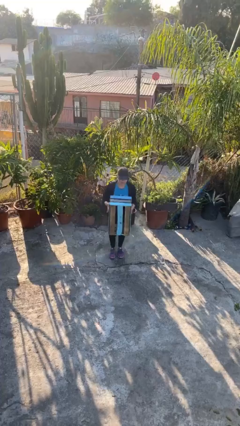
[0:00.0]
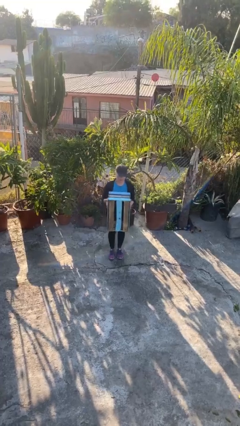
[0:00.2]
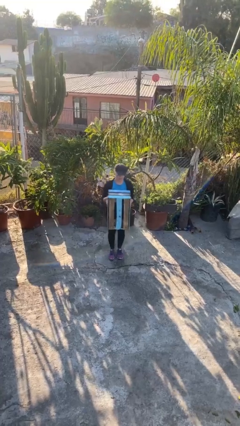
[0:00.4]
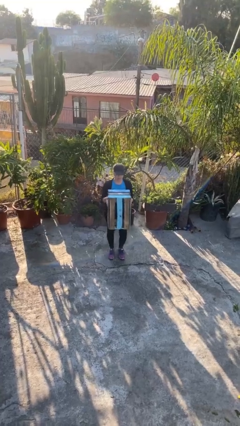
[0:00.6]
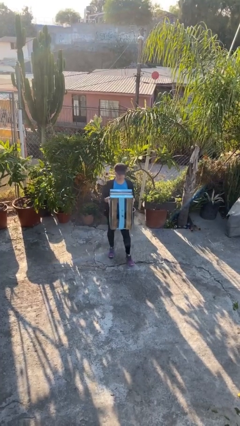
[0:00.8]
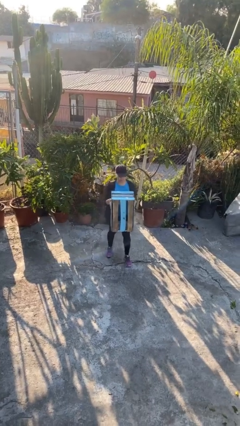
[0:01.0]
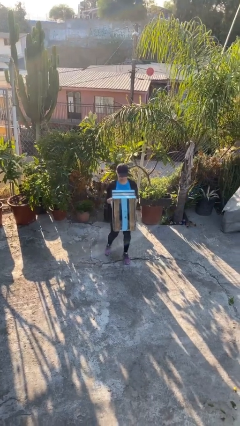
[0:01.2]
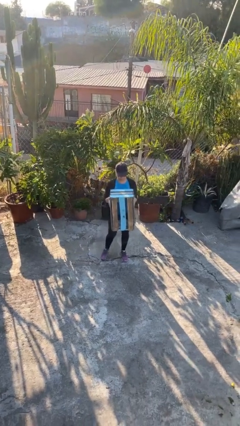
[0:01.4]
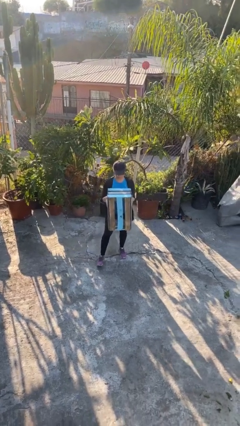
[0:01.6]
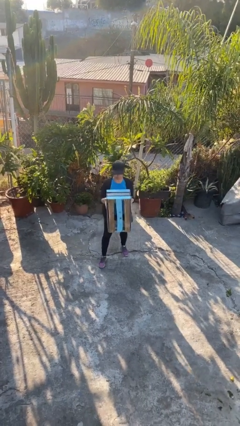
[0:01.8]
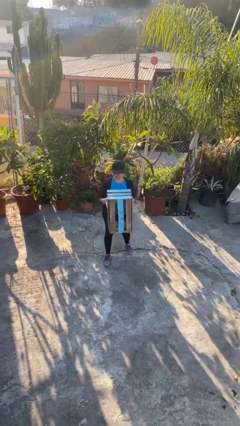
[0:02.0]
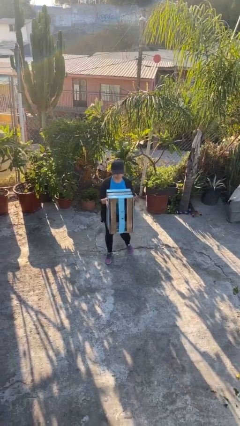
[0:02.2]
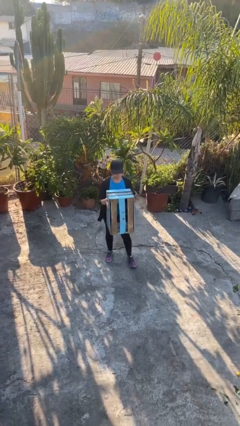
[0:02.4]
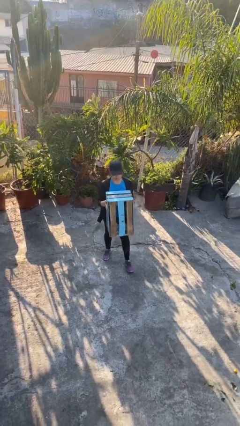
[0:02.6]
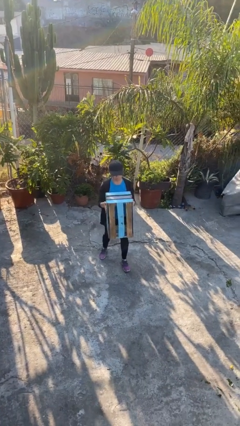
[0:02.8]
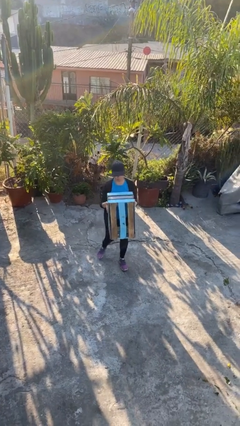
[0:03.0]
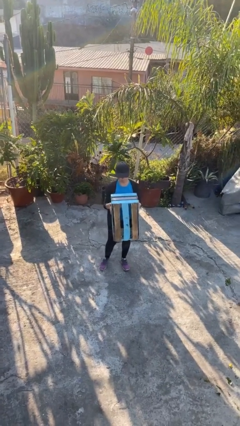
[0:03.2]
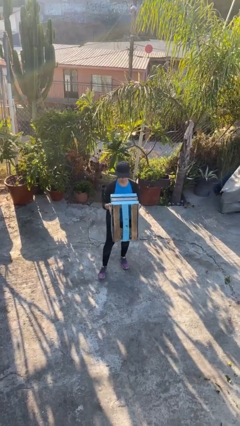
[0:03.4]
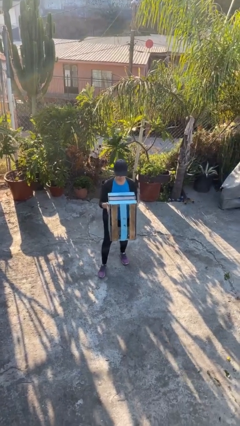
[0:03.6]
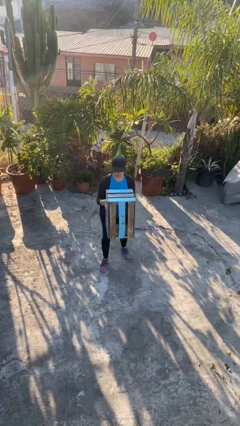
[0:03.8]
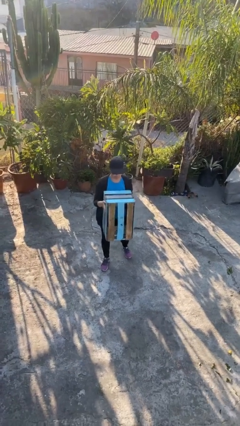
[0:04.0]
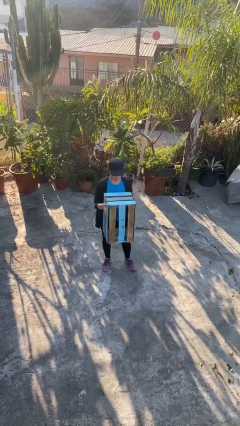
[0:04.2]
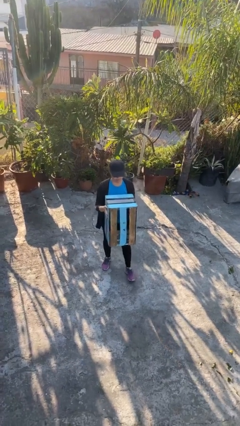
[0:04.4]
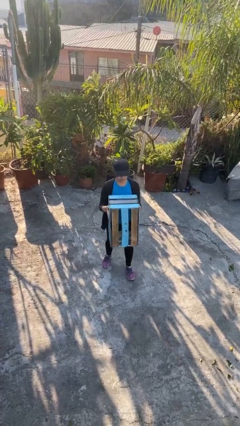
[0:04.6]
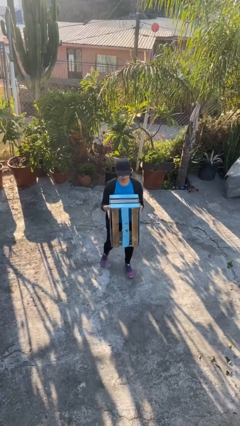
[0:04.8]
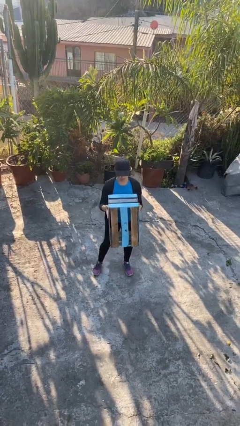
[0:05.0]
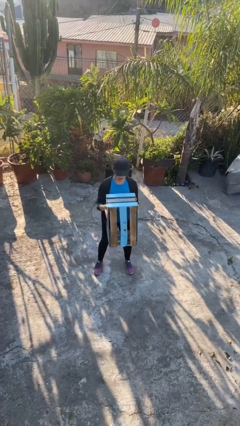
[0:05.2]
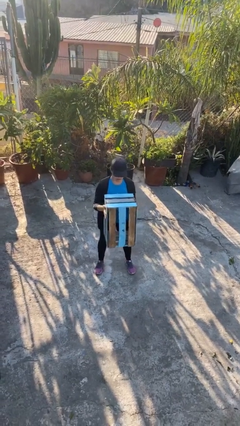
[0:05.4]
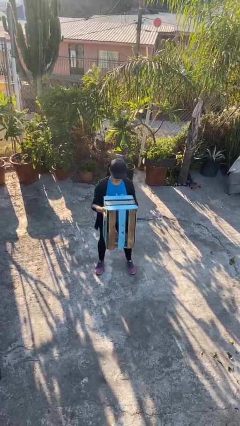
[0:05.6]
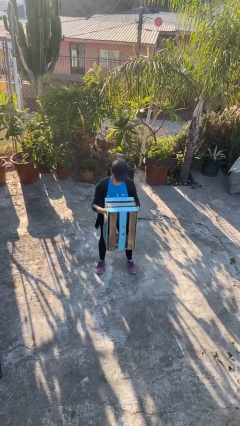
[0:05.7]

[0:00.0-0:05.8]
person carries heavy object

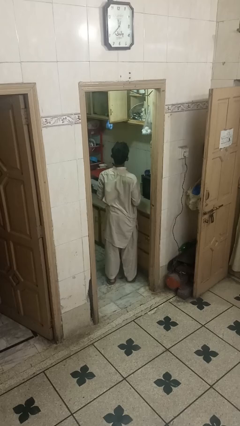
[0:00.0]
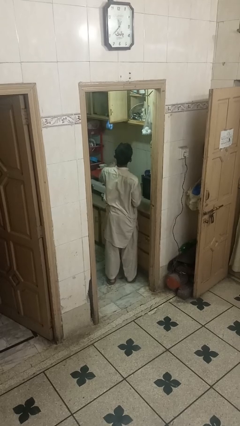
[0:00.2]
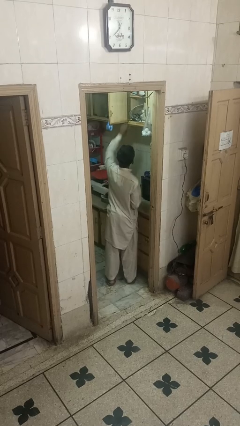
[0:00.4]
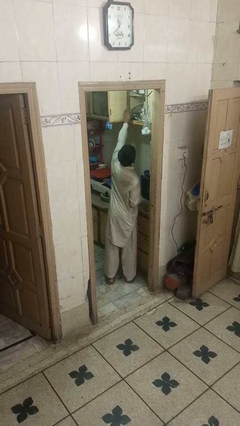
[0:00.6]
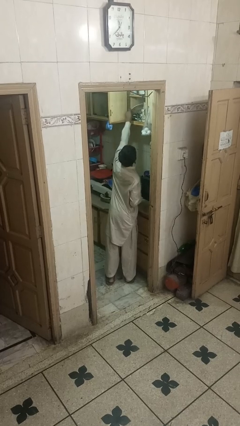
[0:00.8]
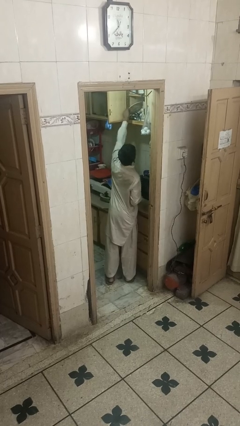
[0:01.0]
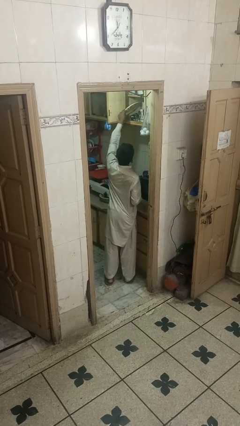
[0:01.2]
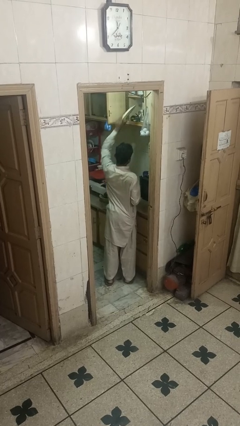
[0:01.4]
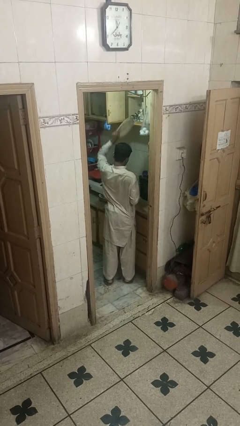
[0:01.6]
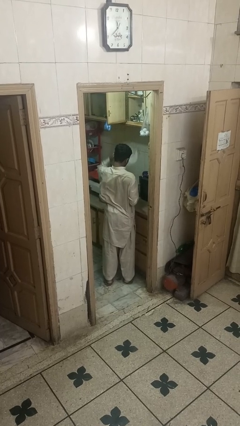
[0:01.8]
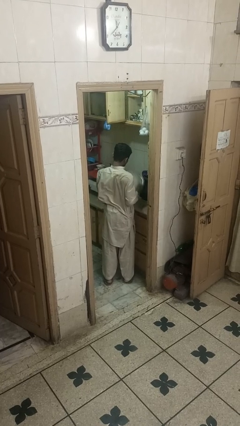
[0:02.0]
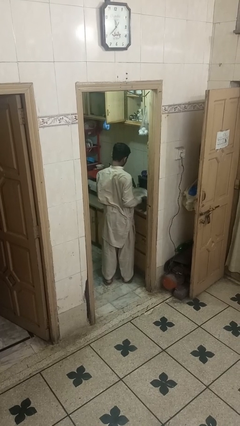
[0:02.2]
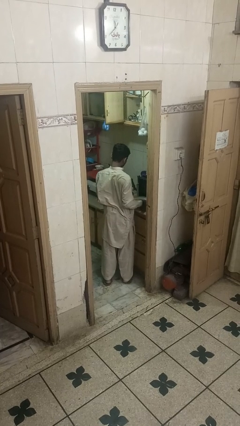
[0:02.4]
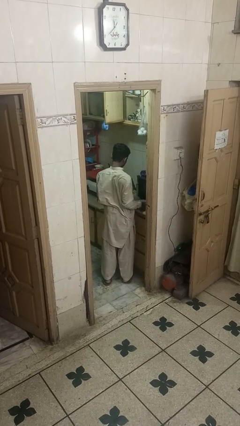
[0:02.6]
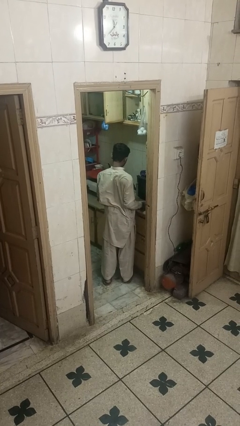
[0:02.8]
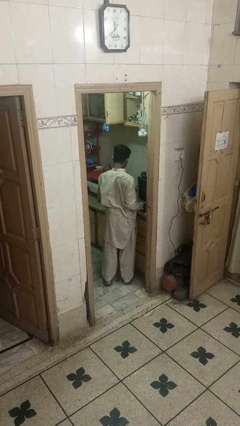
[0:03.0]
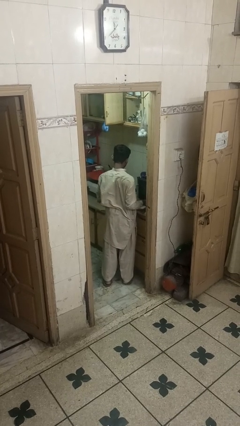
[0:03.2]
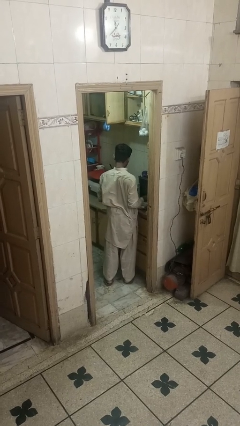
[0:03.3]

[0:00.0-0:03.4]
person takes object from cabinet

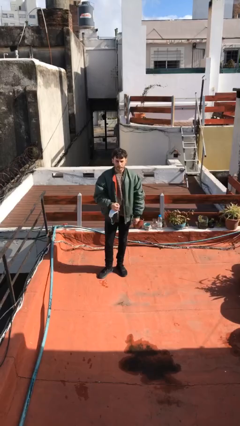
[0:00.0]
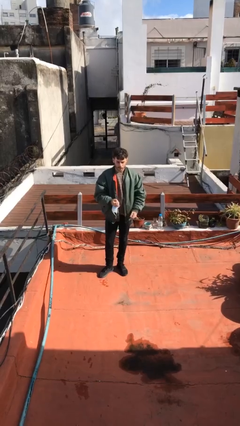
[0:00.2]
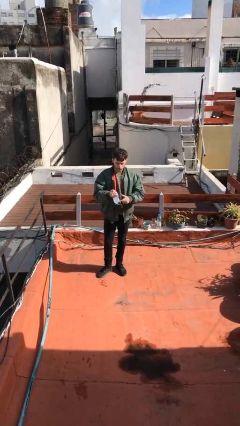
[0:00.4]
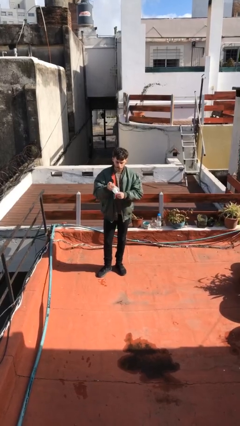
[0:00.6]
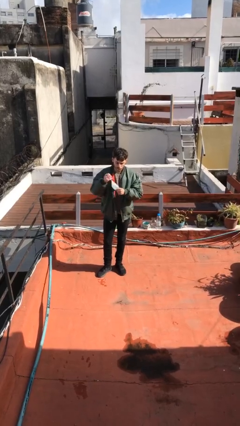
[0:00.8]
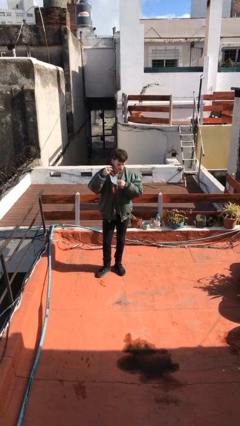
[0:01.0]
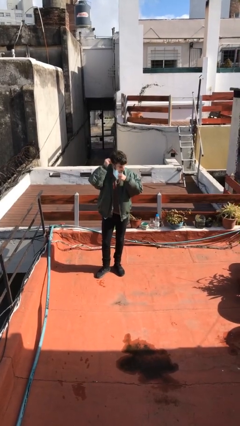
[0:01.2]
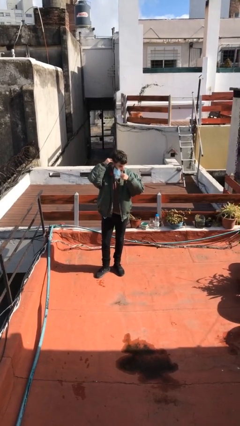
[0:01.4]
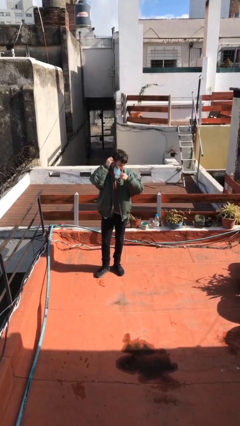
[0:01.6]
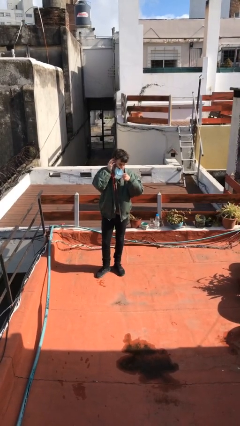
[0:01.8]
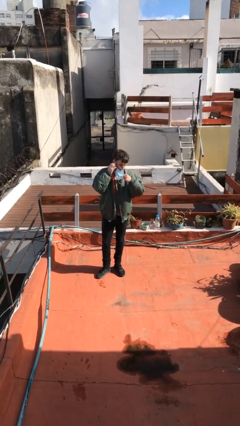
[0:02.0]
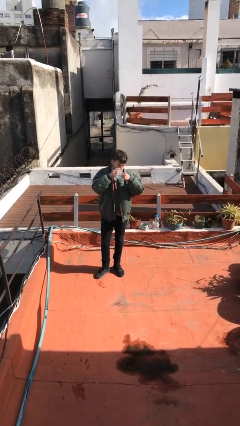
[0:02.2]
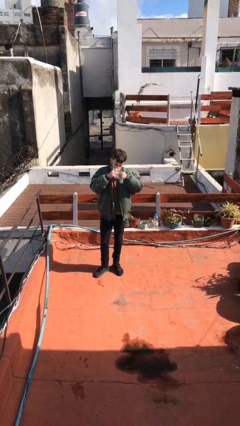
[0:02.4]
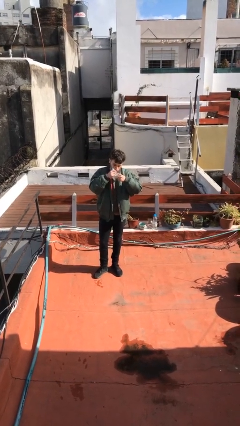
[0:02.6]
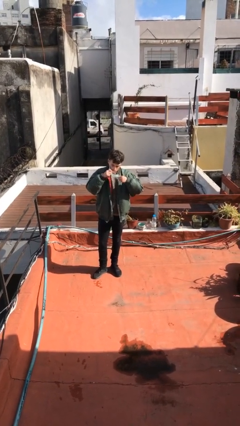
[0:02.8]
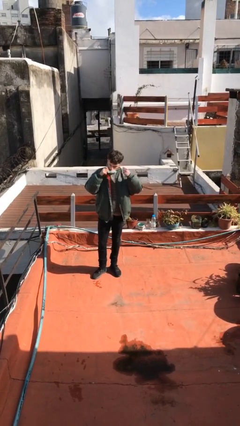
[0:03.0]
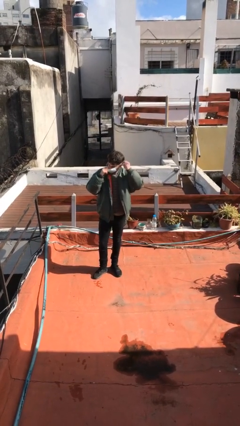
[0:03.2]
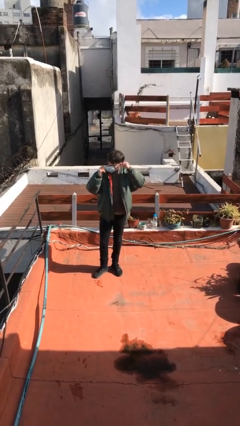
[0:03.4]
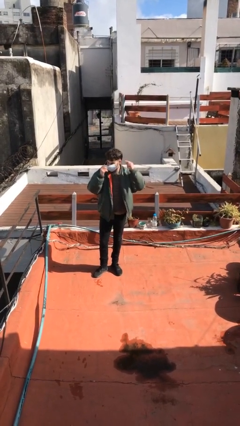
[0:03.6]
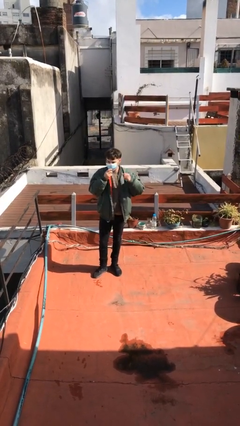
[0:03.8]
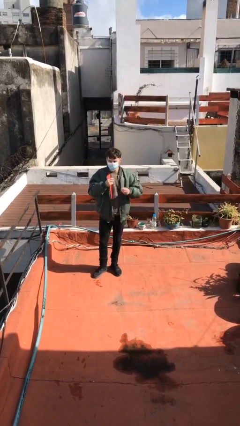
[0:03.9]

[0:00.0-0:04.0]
person puts on facemask

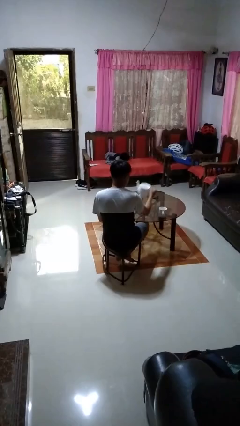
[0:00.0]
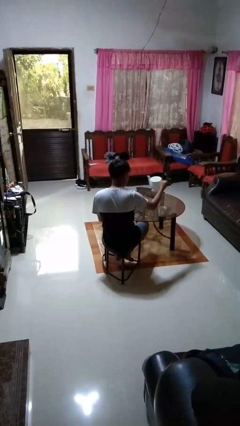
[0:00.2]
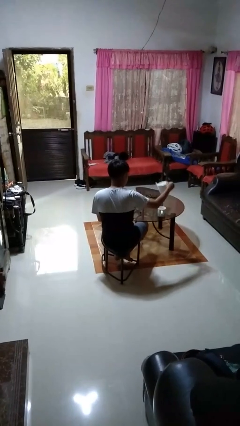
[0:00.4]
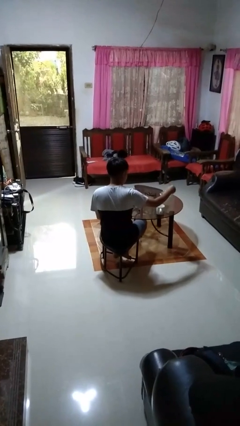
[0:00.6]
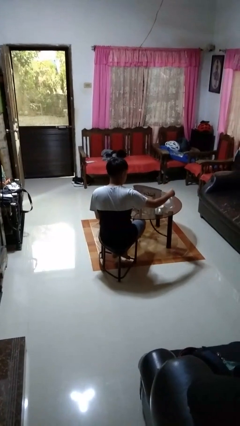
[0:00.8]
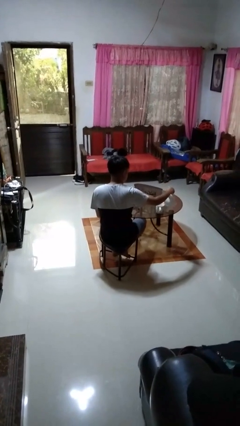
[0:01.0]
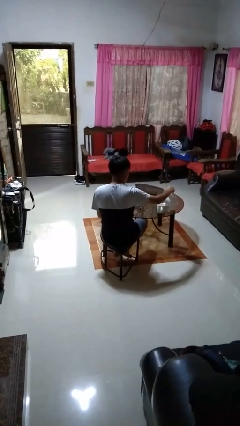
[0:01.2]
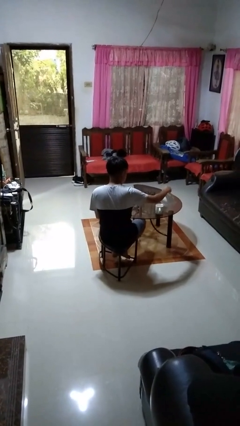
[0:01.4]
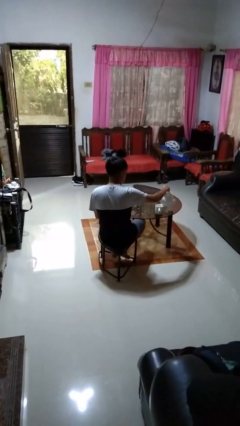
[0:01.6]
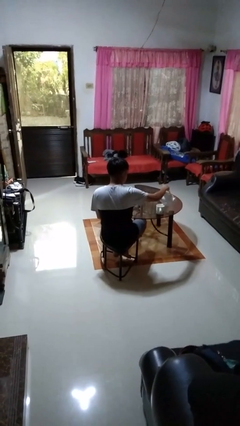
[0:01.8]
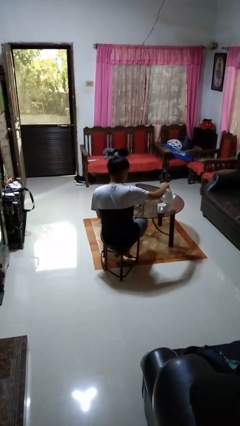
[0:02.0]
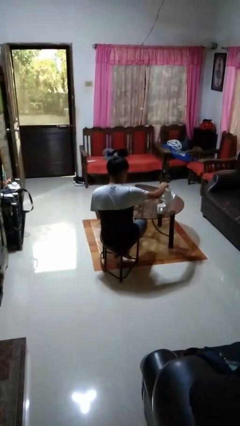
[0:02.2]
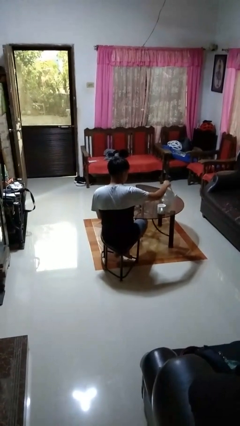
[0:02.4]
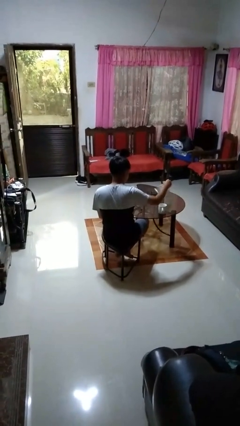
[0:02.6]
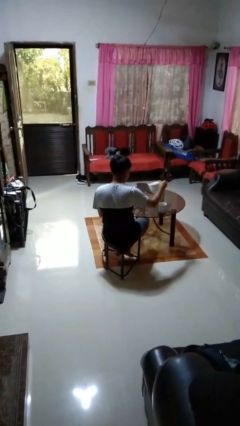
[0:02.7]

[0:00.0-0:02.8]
person pours coffee into mug

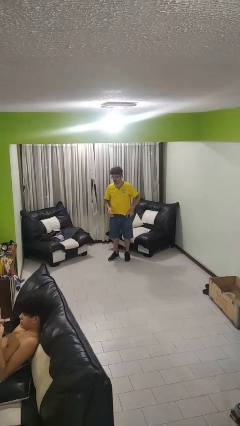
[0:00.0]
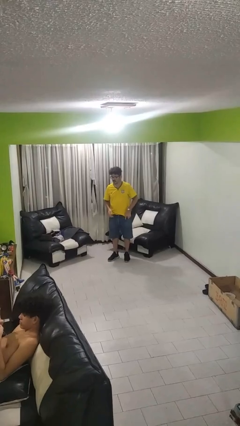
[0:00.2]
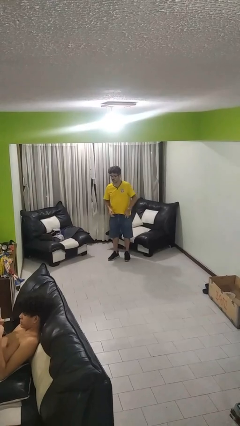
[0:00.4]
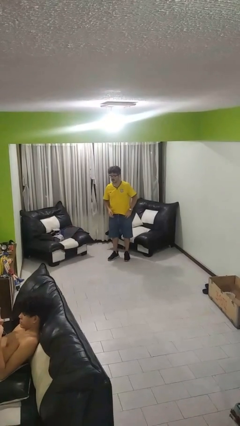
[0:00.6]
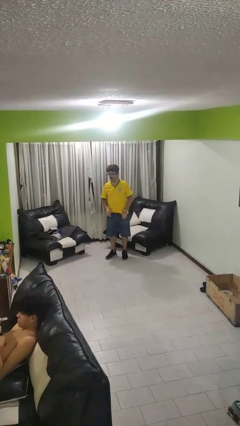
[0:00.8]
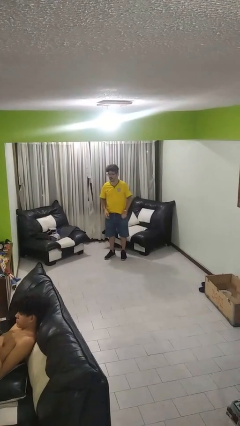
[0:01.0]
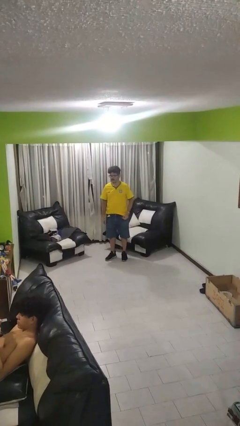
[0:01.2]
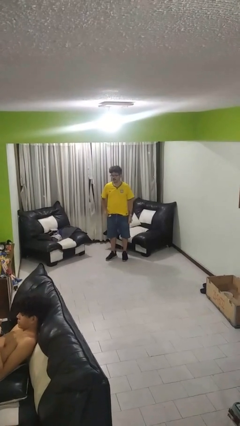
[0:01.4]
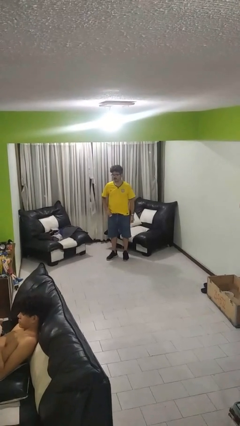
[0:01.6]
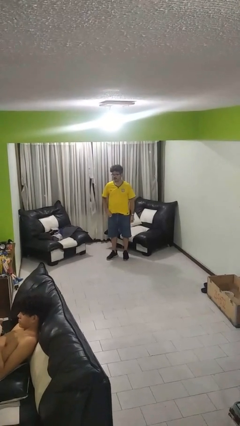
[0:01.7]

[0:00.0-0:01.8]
person puts phone into pocket
